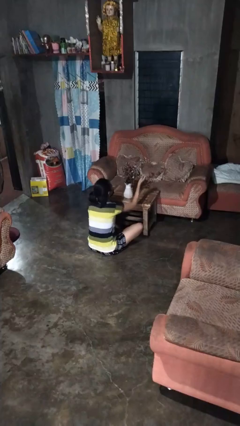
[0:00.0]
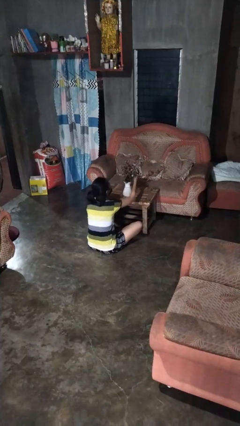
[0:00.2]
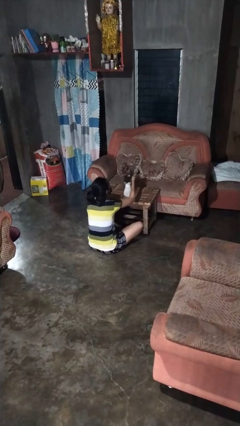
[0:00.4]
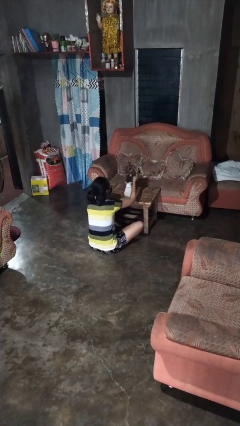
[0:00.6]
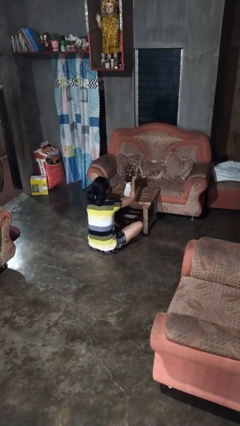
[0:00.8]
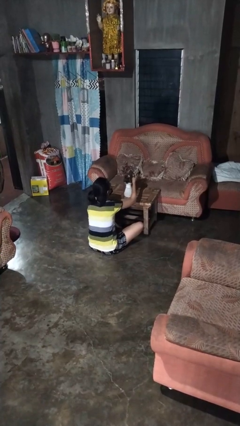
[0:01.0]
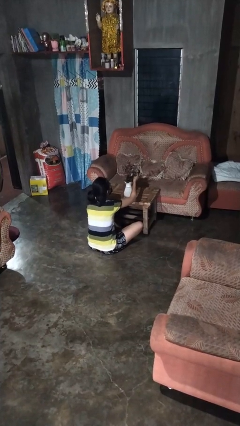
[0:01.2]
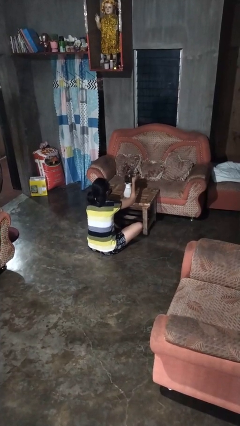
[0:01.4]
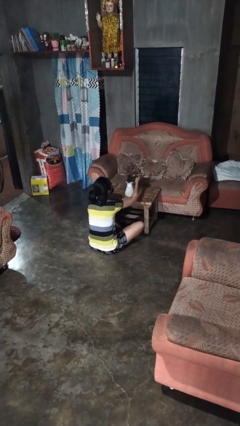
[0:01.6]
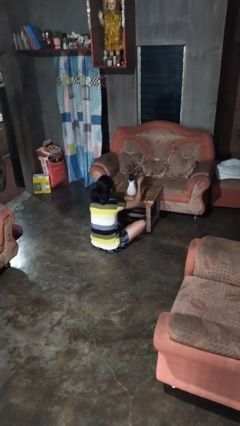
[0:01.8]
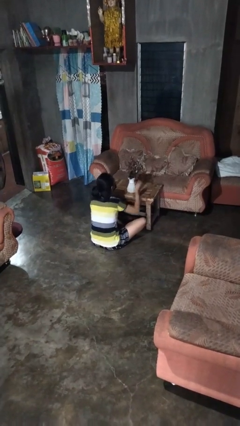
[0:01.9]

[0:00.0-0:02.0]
person arranges flowers in vase

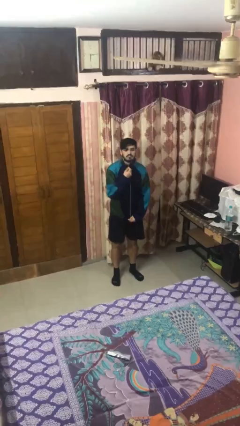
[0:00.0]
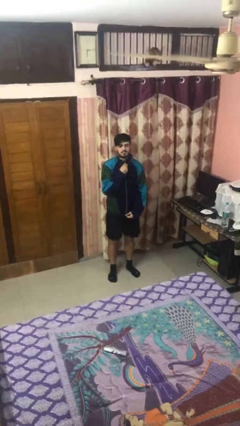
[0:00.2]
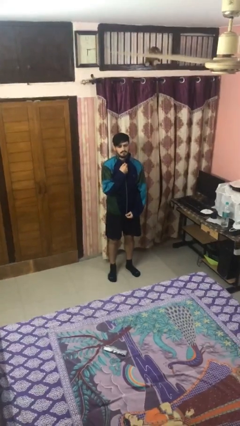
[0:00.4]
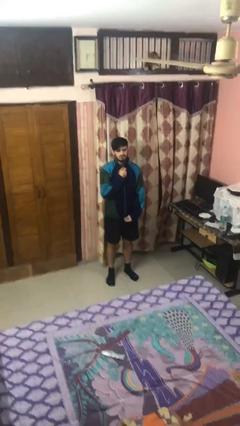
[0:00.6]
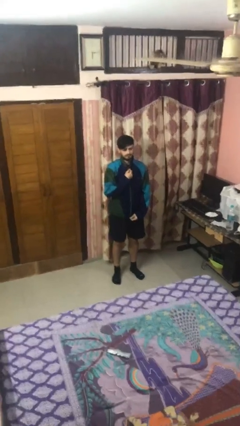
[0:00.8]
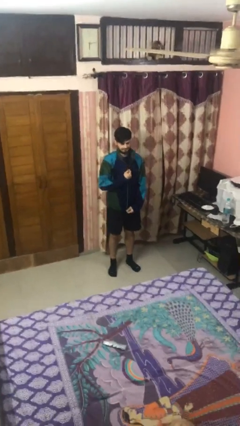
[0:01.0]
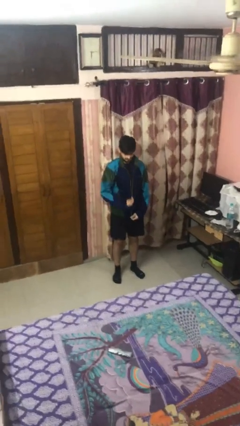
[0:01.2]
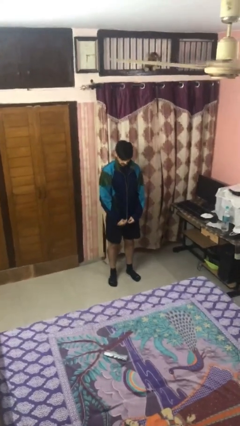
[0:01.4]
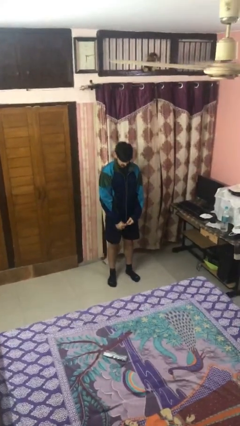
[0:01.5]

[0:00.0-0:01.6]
person unzips jacket

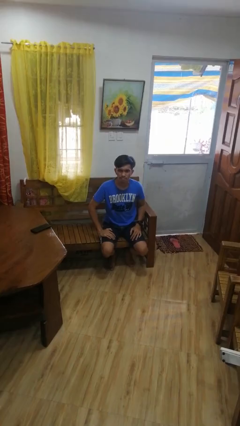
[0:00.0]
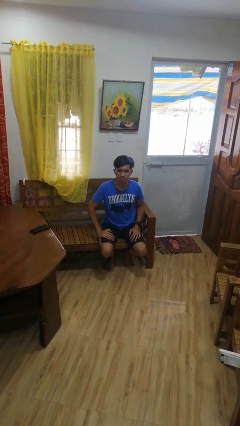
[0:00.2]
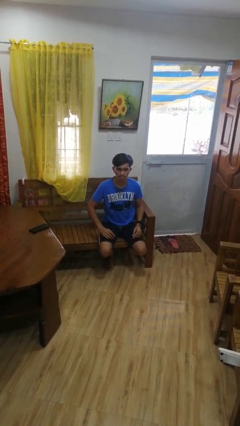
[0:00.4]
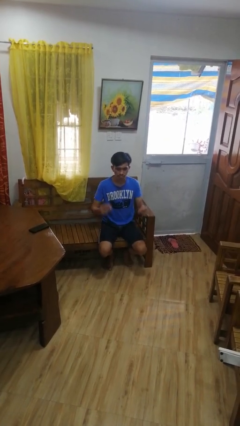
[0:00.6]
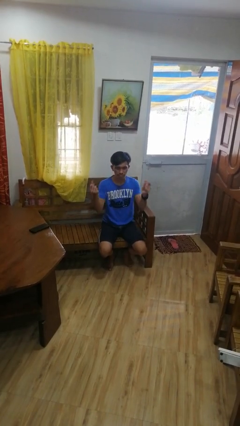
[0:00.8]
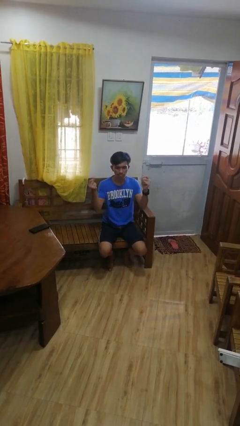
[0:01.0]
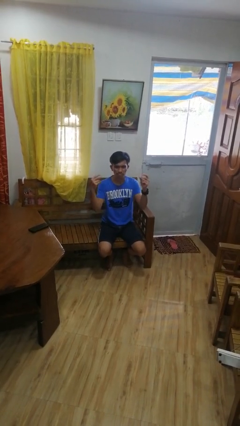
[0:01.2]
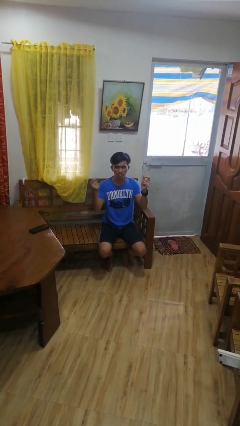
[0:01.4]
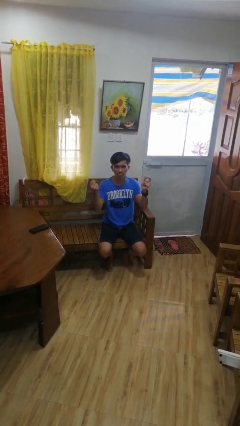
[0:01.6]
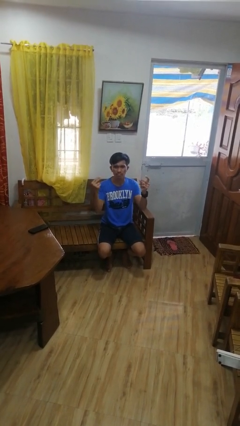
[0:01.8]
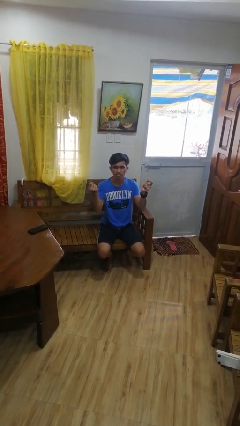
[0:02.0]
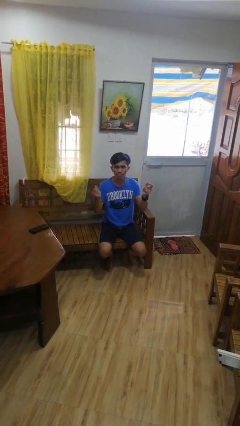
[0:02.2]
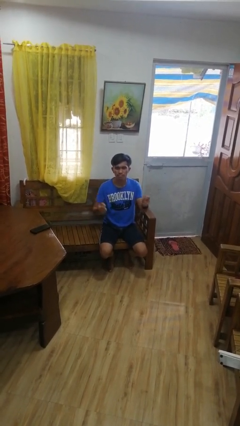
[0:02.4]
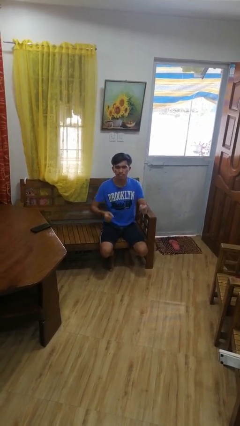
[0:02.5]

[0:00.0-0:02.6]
person snaps fingers

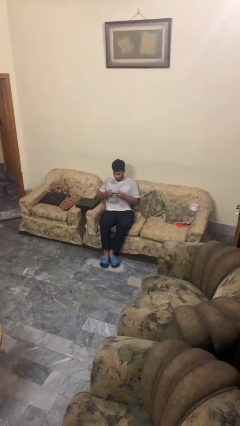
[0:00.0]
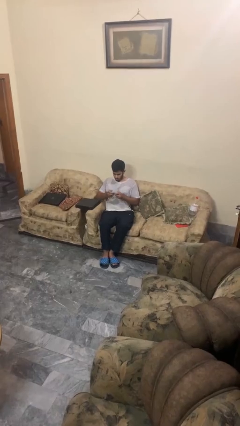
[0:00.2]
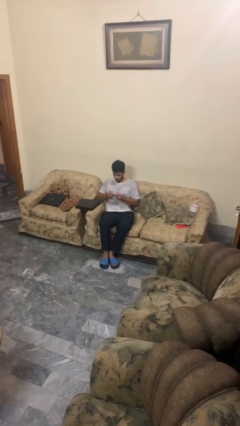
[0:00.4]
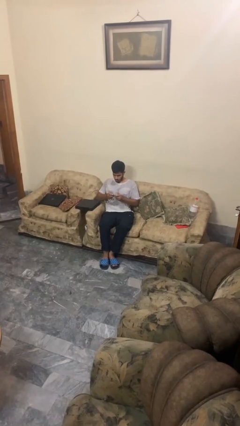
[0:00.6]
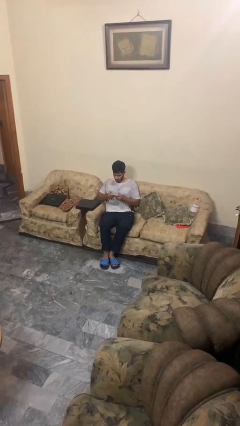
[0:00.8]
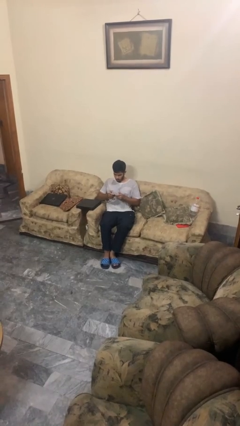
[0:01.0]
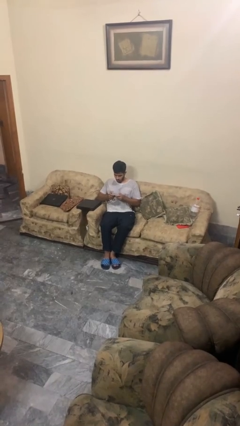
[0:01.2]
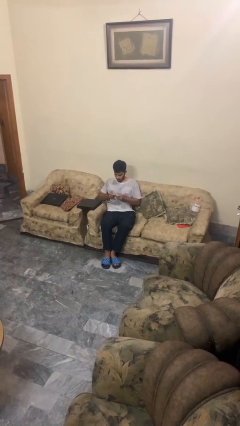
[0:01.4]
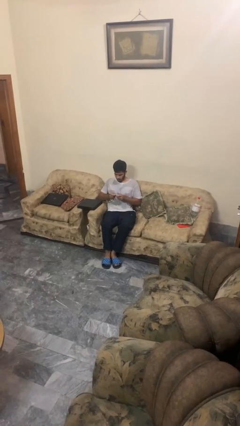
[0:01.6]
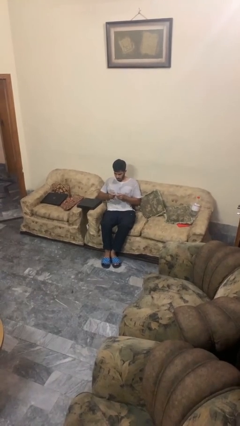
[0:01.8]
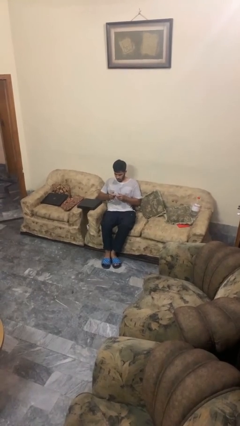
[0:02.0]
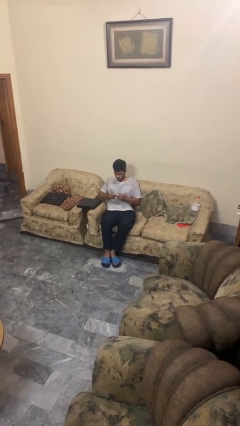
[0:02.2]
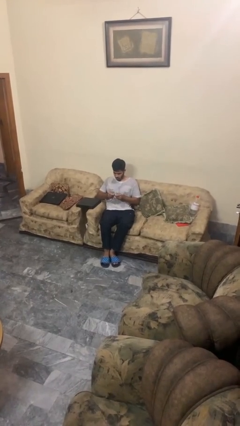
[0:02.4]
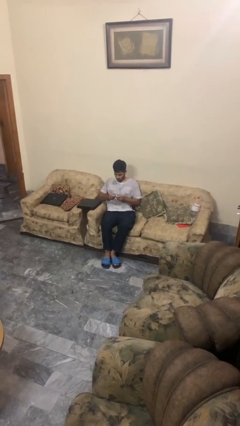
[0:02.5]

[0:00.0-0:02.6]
person interacts with handheld game

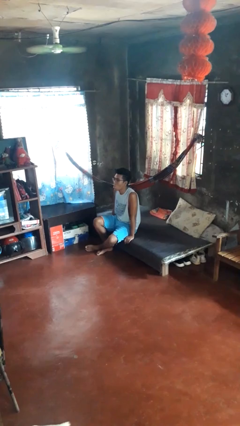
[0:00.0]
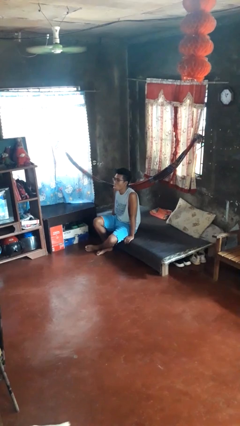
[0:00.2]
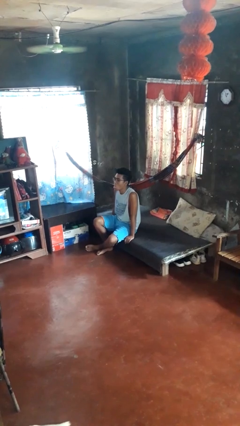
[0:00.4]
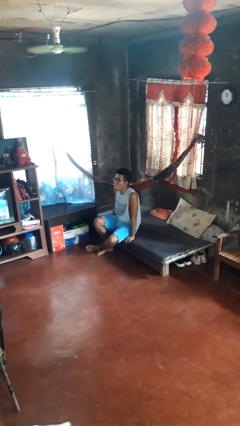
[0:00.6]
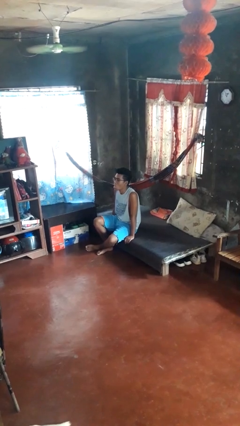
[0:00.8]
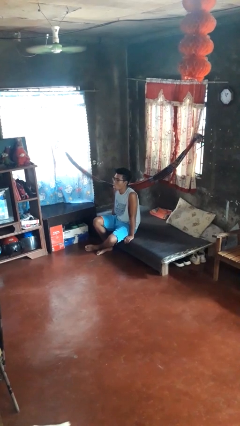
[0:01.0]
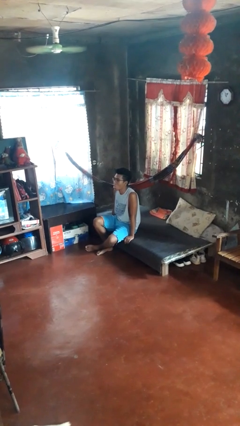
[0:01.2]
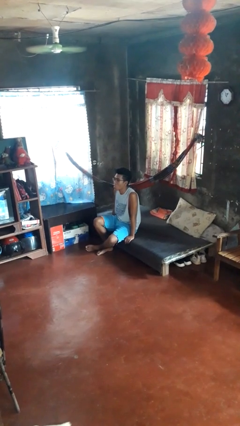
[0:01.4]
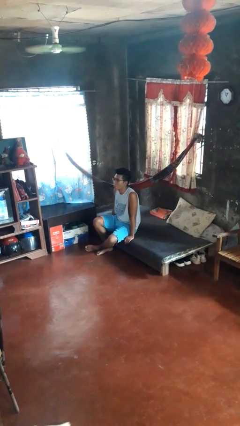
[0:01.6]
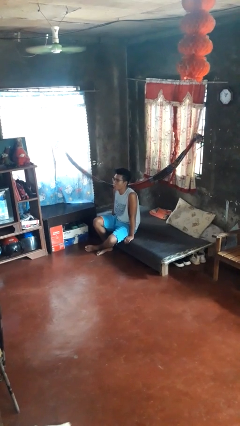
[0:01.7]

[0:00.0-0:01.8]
person sticks out tongue

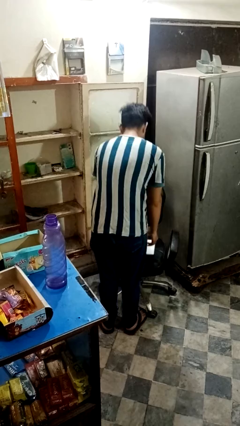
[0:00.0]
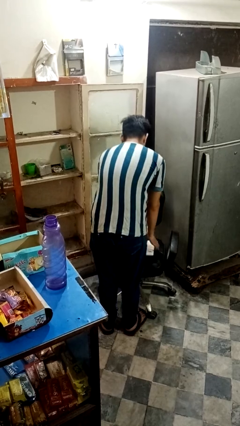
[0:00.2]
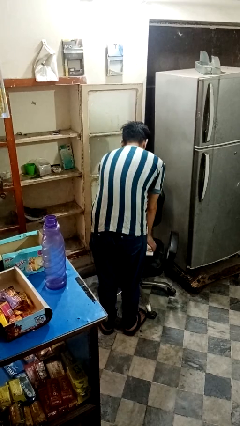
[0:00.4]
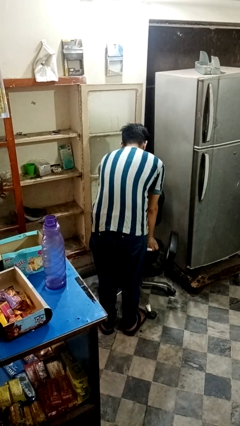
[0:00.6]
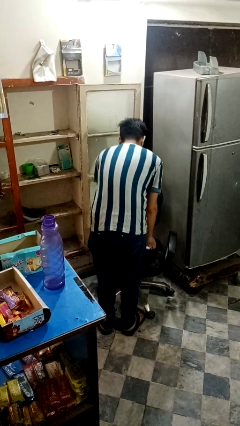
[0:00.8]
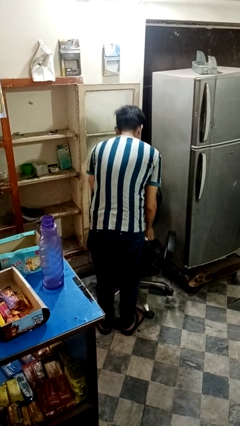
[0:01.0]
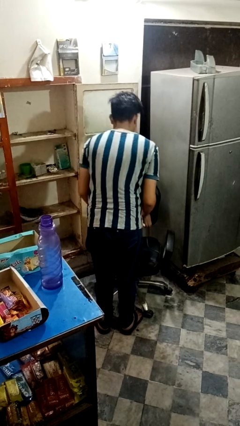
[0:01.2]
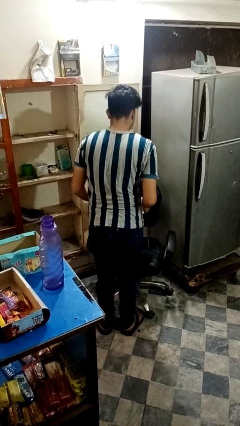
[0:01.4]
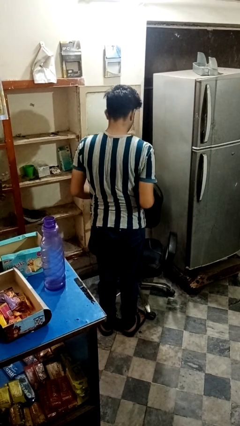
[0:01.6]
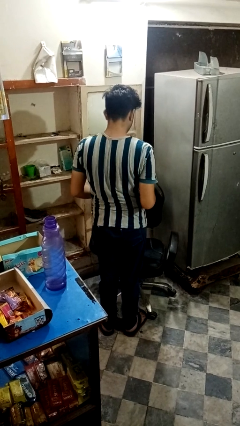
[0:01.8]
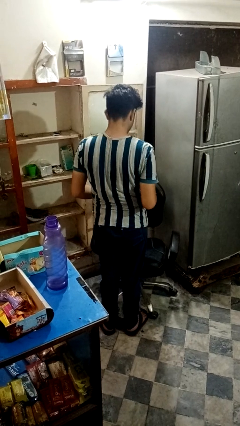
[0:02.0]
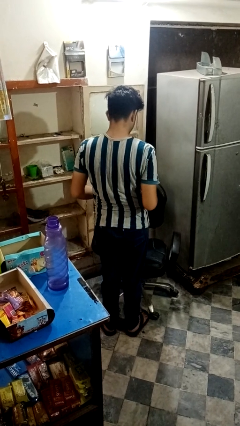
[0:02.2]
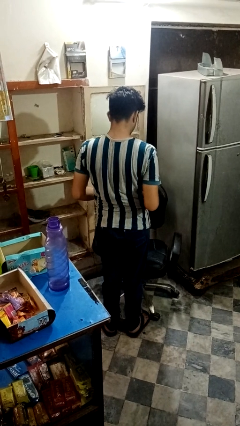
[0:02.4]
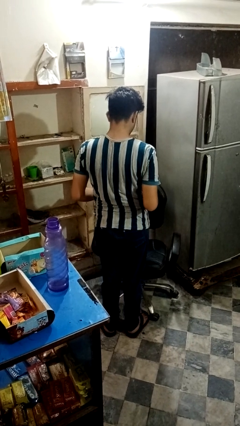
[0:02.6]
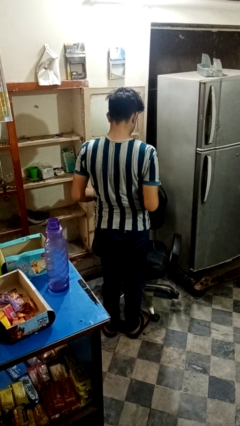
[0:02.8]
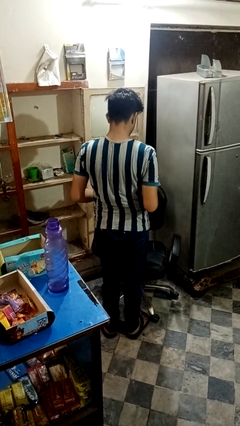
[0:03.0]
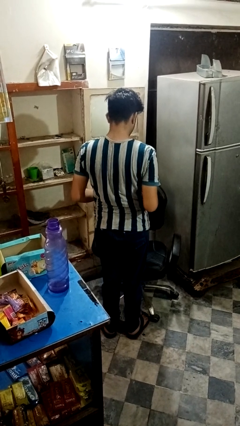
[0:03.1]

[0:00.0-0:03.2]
person picks up object from couch

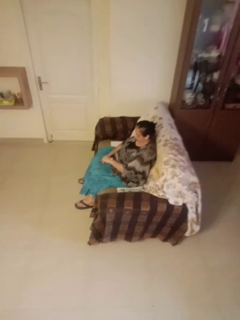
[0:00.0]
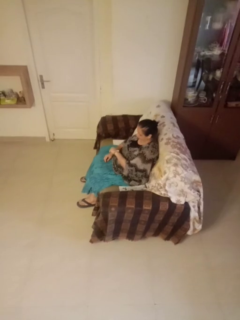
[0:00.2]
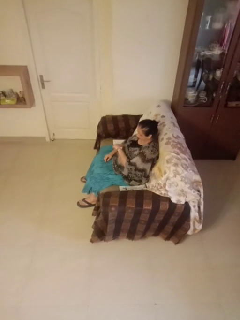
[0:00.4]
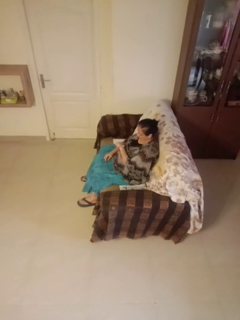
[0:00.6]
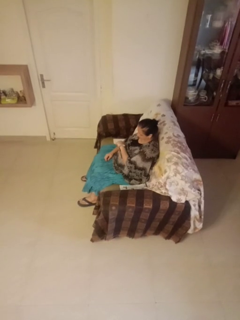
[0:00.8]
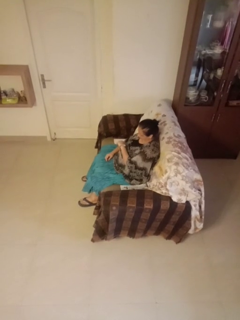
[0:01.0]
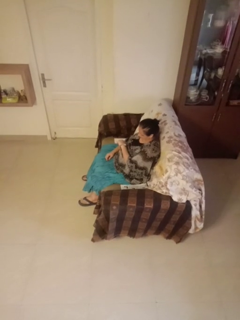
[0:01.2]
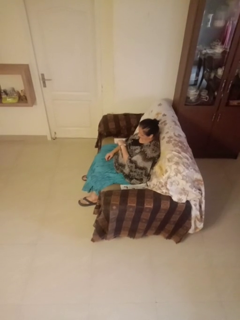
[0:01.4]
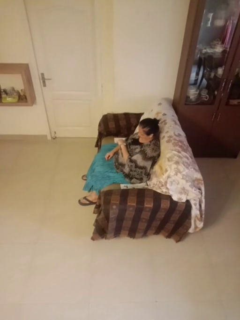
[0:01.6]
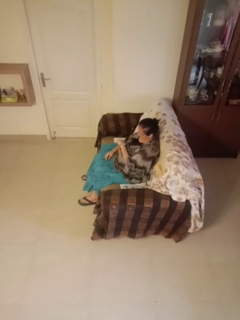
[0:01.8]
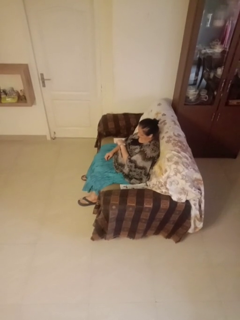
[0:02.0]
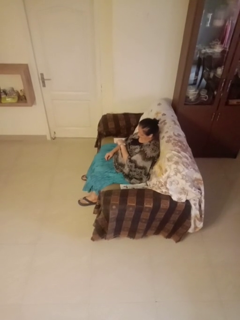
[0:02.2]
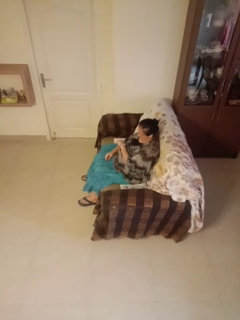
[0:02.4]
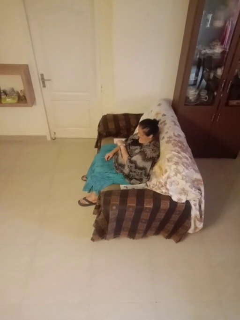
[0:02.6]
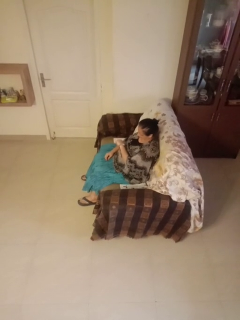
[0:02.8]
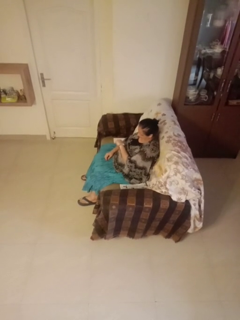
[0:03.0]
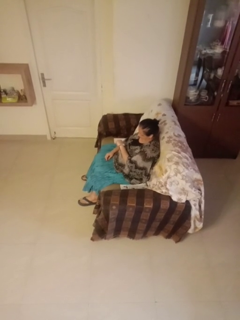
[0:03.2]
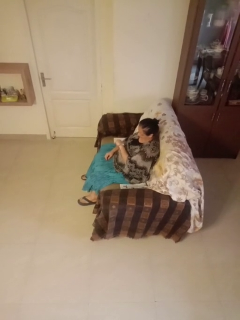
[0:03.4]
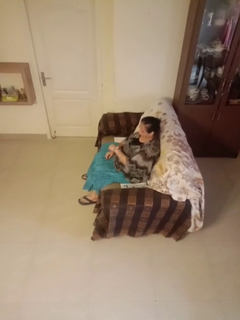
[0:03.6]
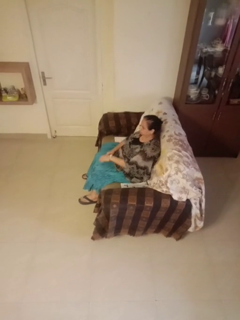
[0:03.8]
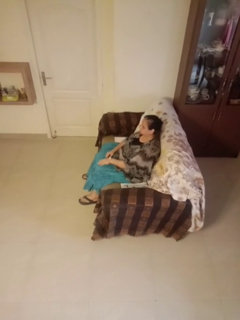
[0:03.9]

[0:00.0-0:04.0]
person looks at wristwatch
